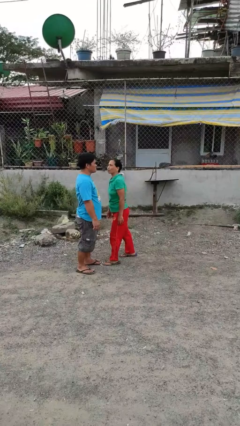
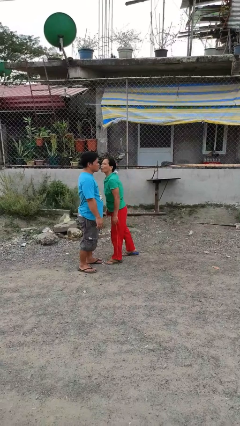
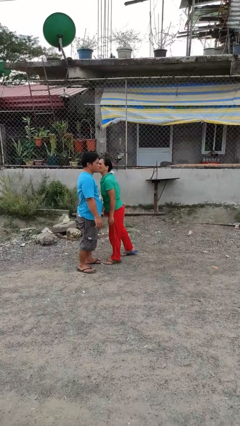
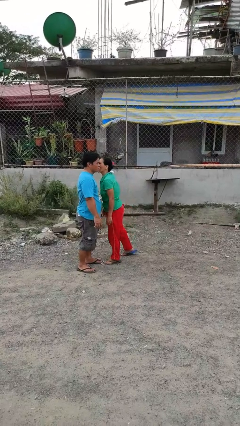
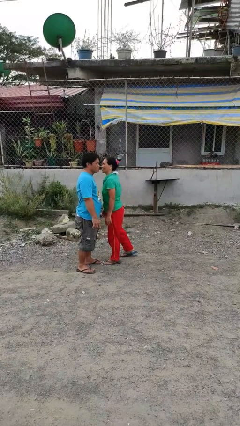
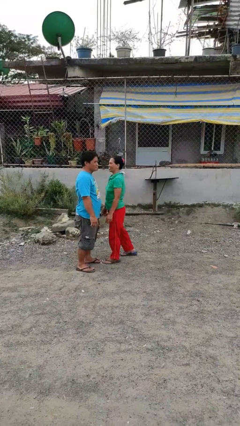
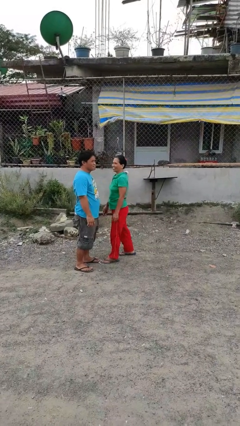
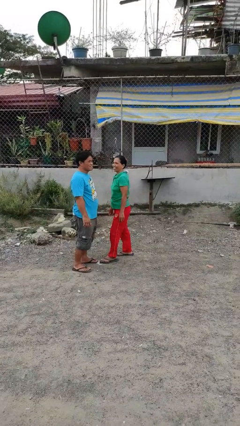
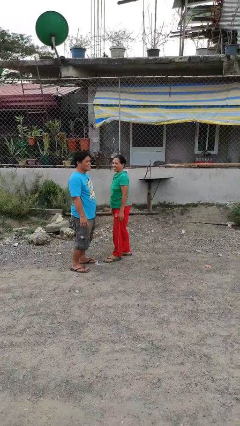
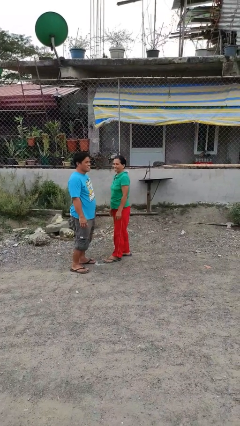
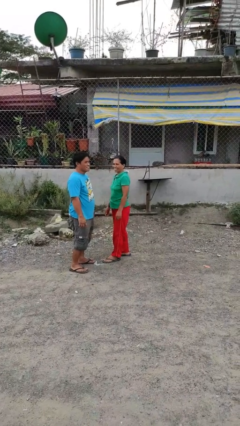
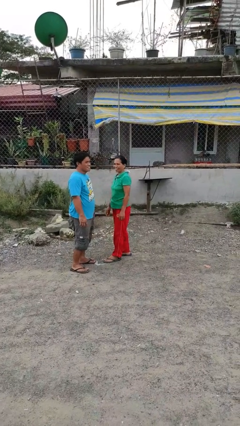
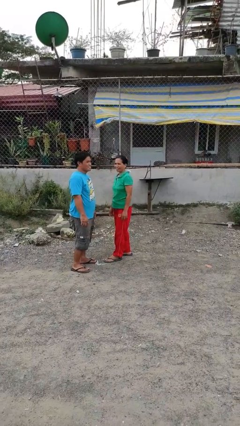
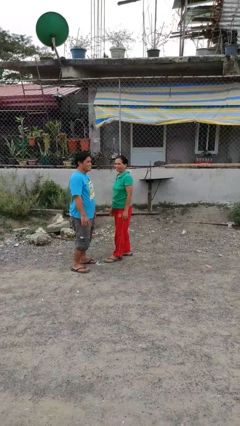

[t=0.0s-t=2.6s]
person kisses cheek of person

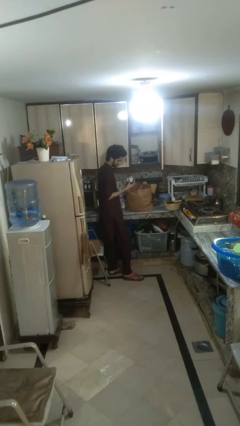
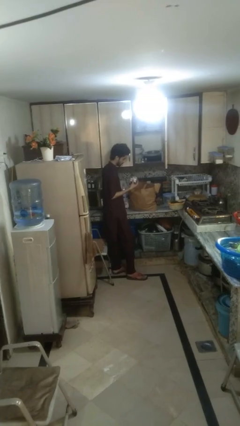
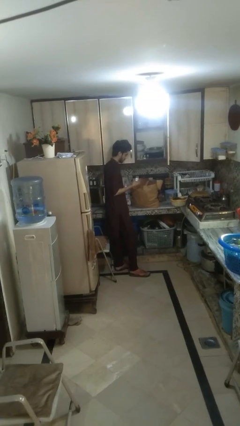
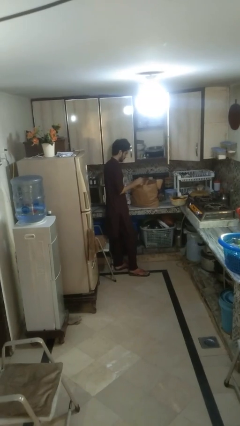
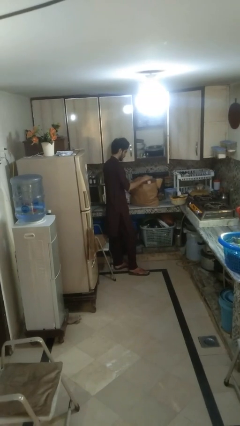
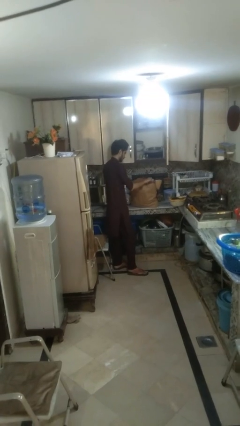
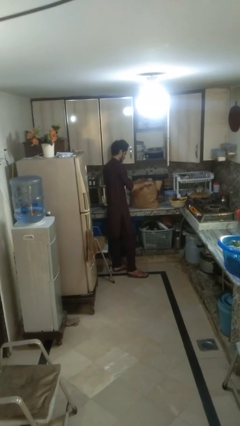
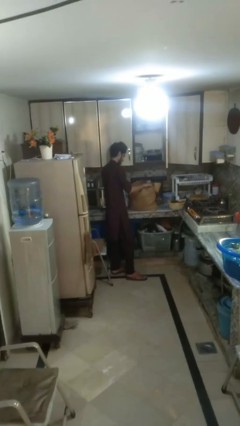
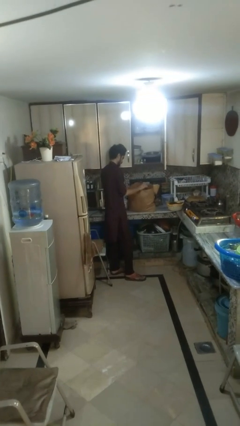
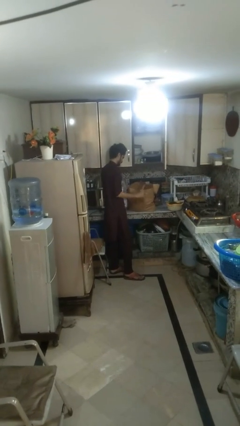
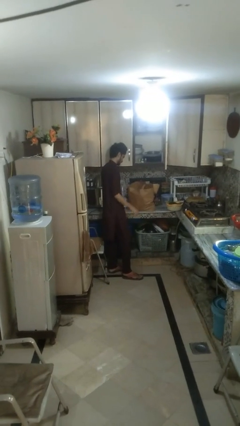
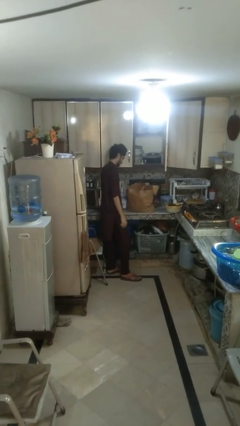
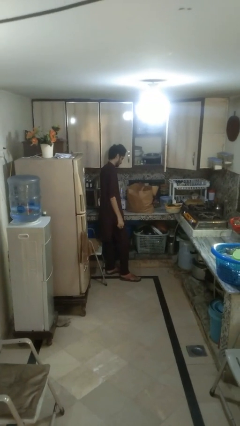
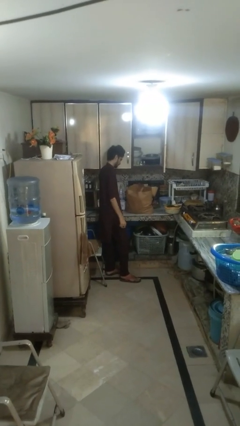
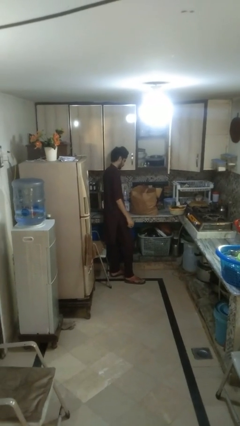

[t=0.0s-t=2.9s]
person puts object into bag

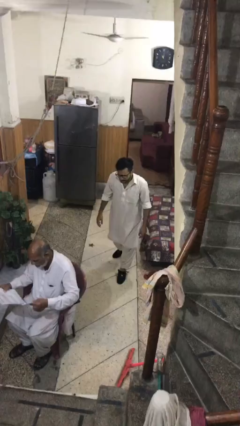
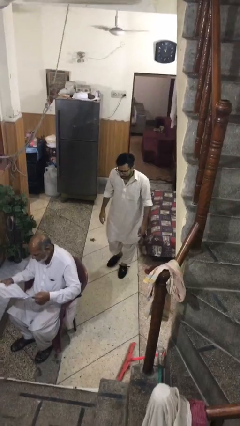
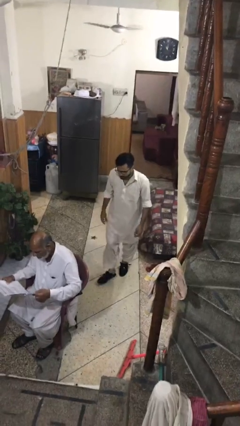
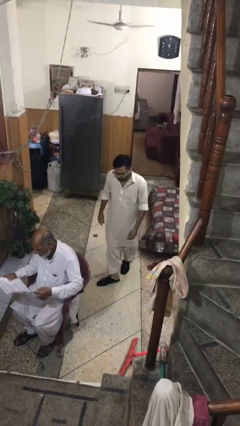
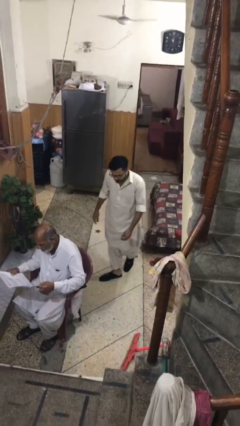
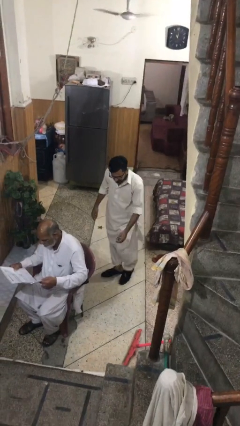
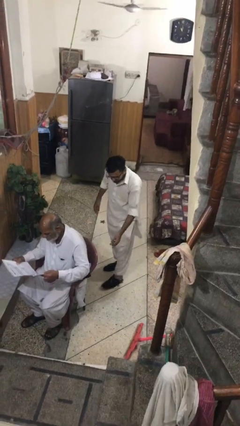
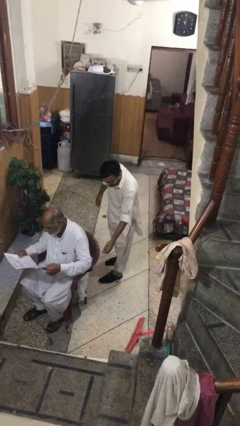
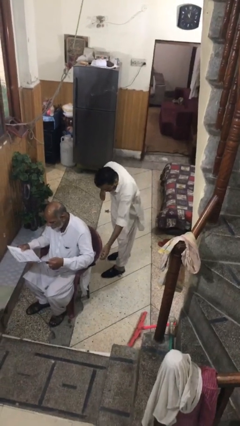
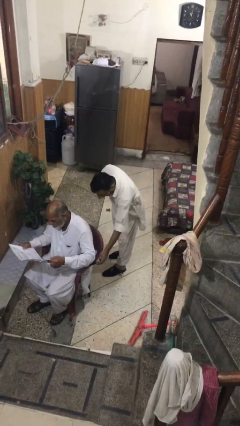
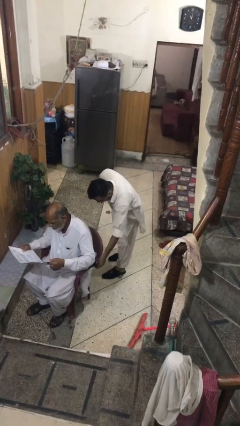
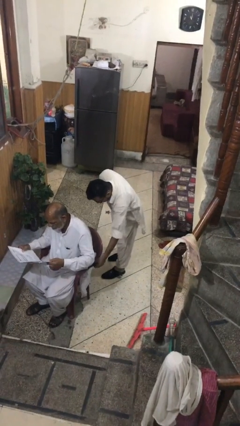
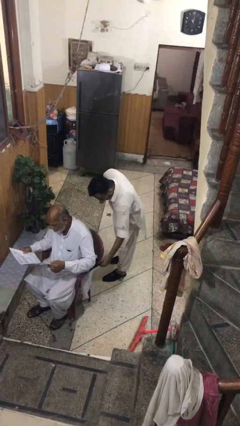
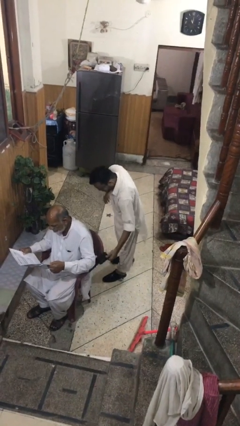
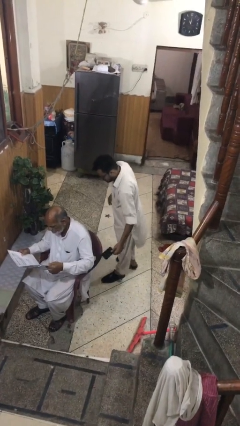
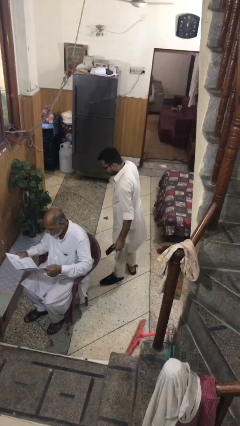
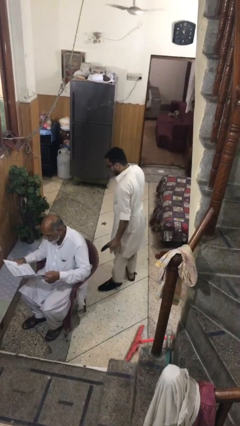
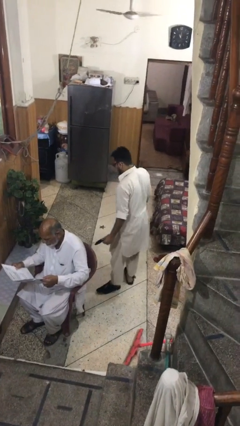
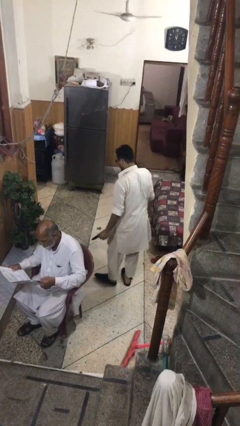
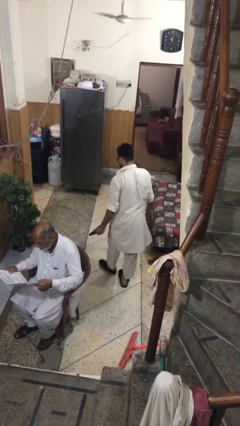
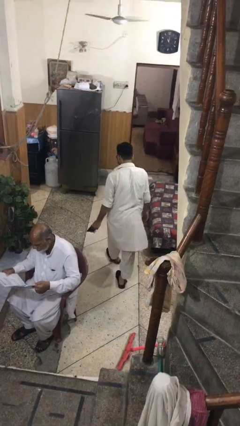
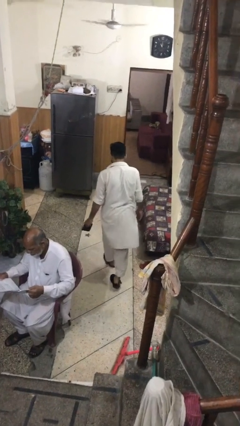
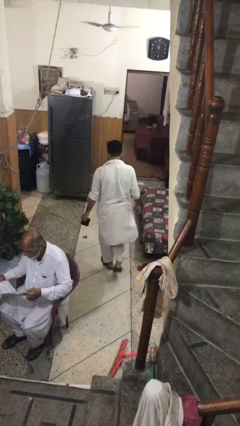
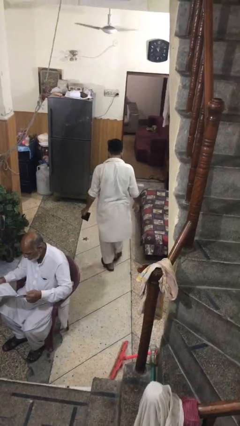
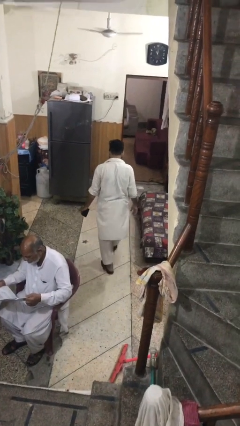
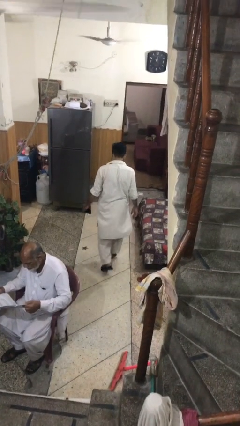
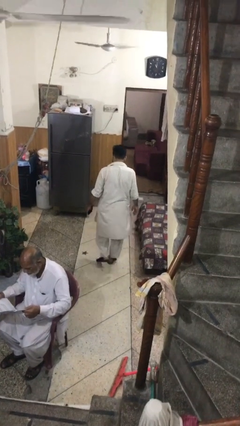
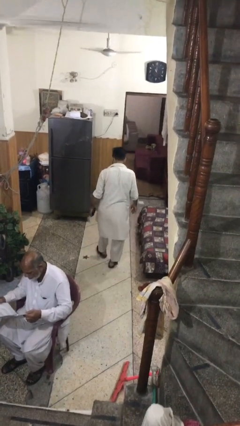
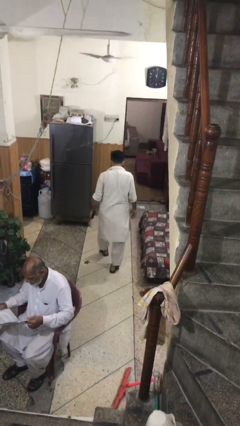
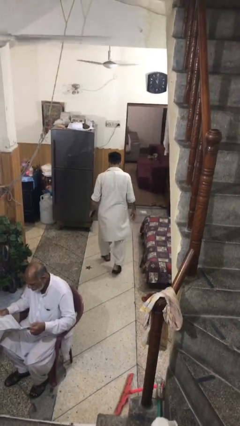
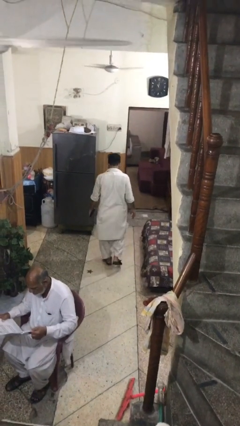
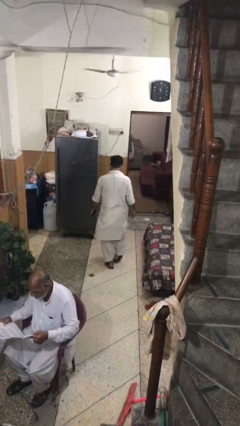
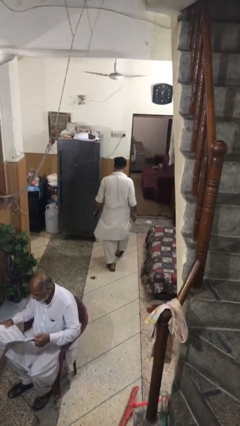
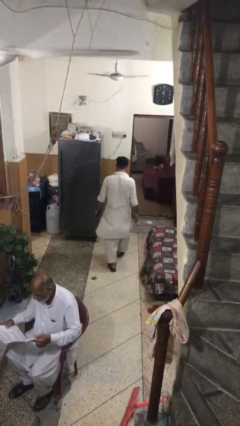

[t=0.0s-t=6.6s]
person steals object from person

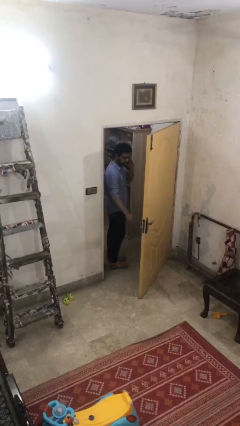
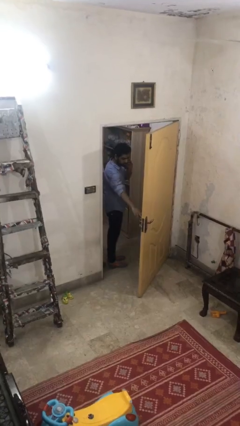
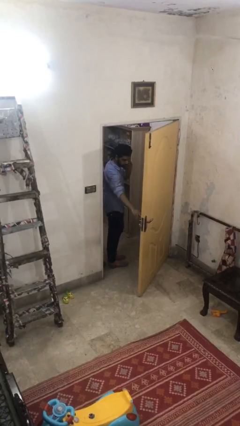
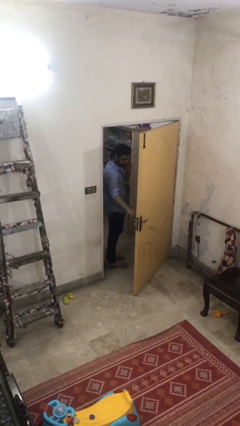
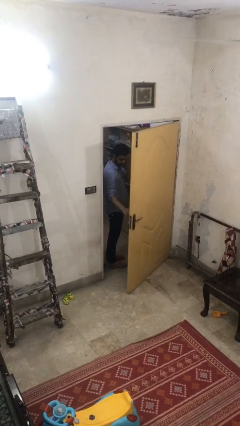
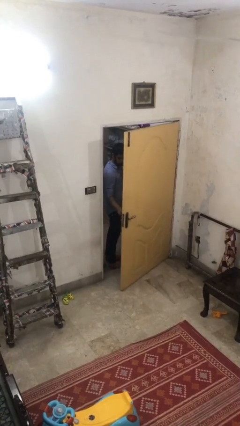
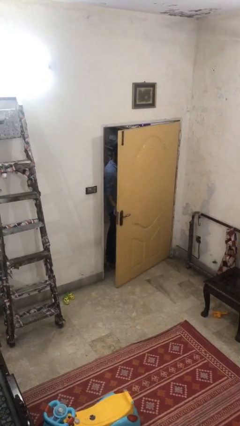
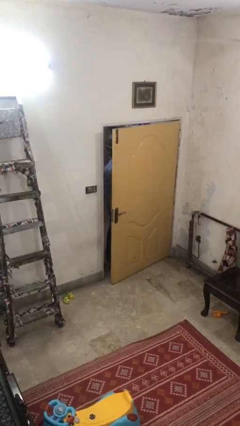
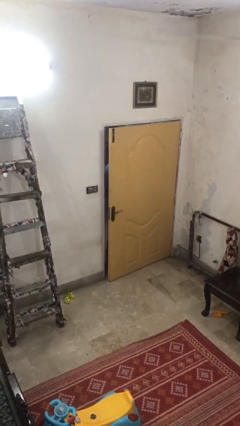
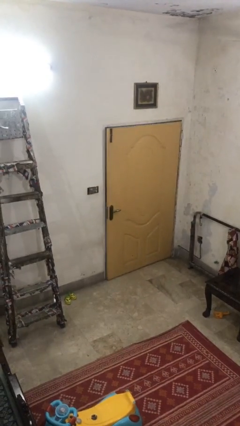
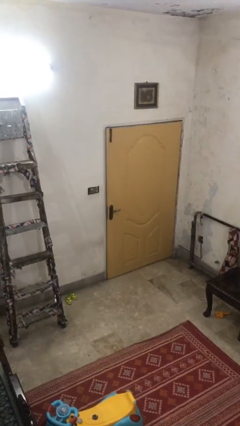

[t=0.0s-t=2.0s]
person closes facility door

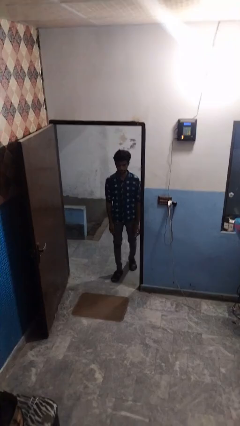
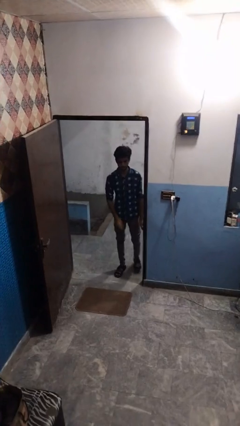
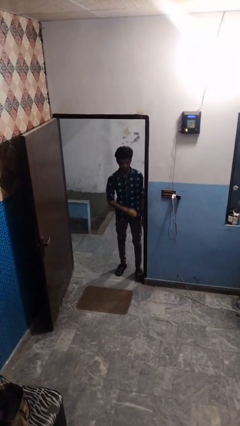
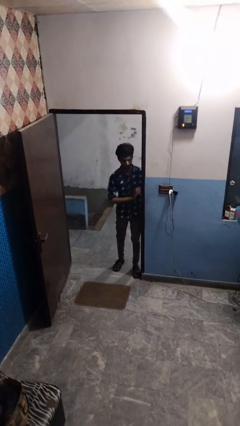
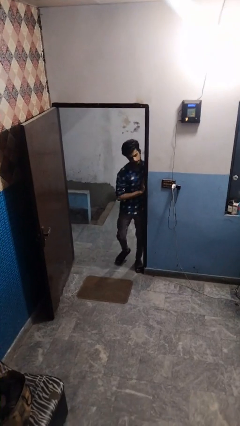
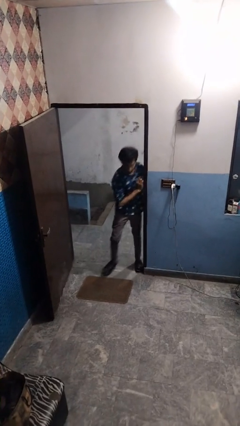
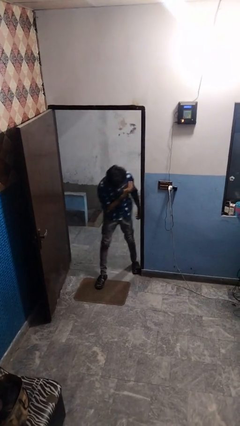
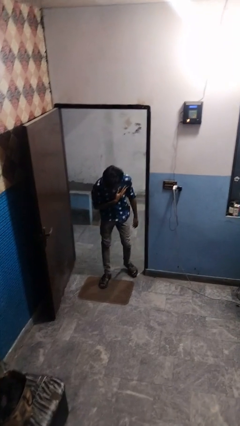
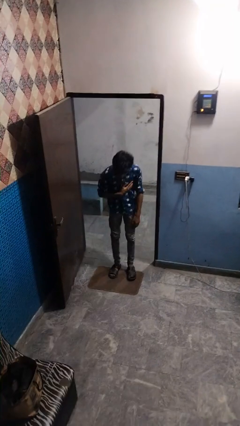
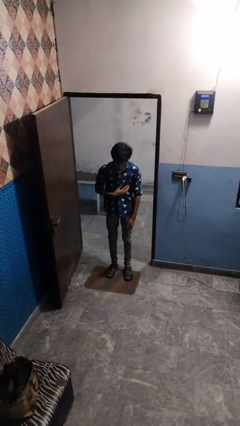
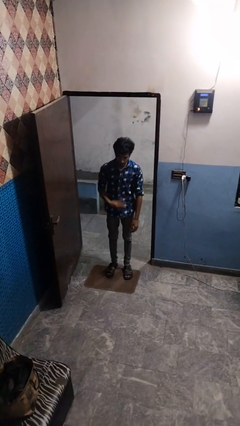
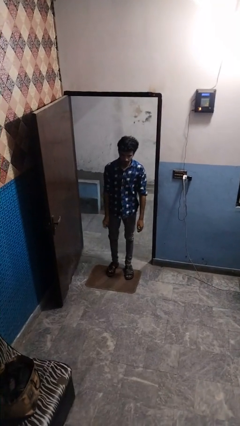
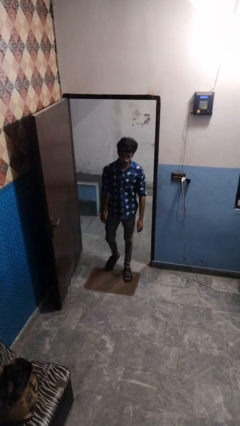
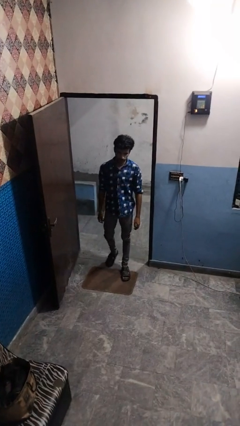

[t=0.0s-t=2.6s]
person bumps into wall

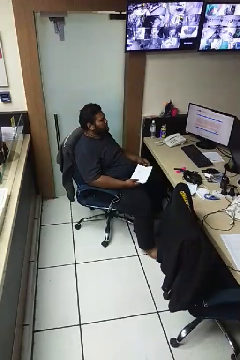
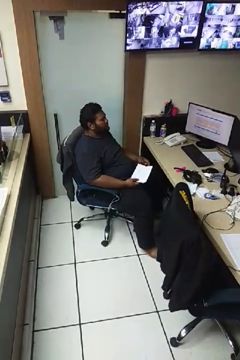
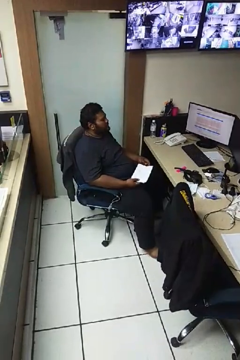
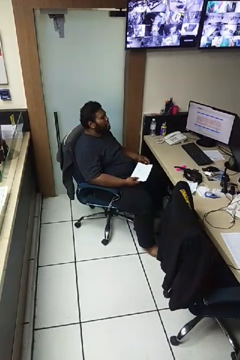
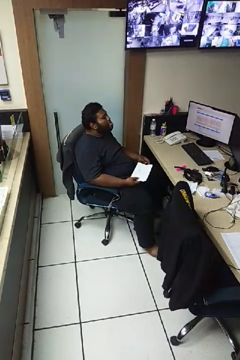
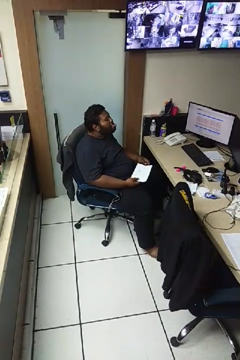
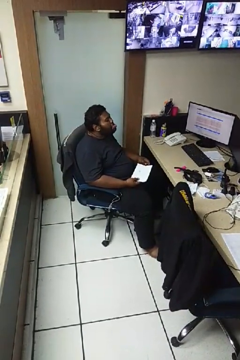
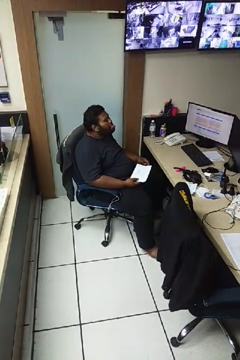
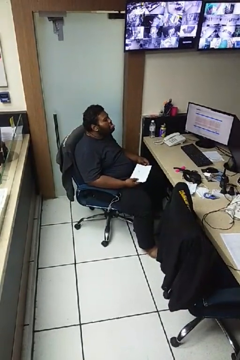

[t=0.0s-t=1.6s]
person sticks out tongue
